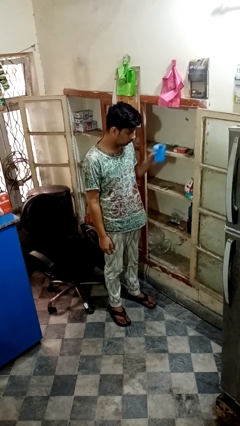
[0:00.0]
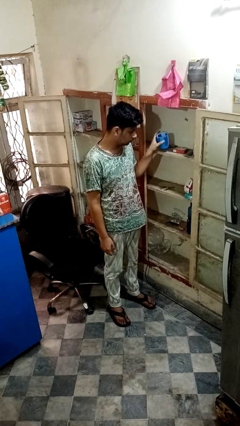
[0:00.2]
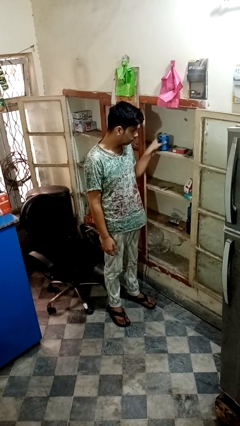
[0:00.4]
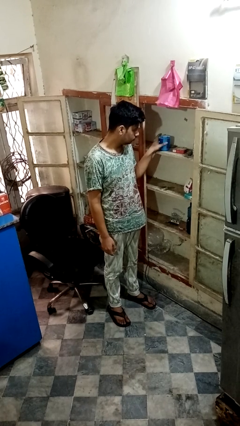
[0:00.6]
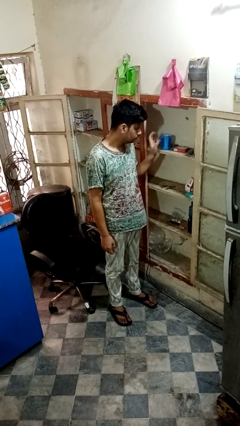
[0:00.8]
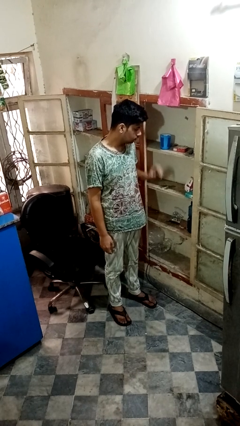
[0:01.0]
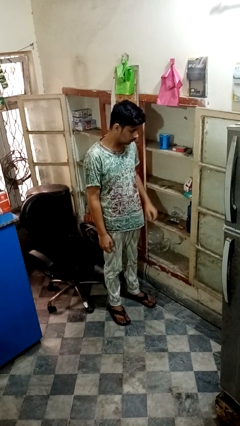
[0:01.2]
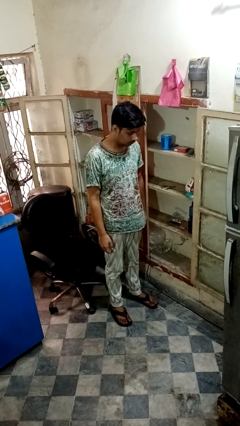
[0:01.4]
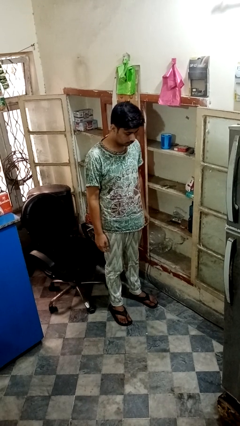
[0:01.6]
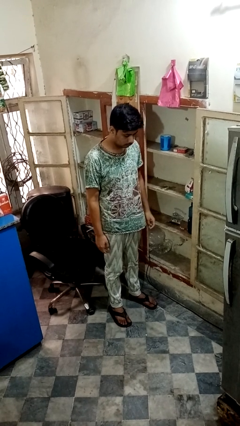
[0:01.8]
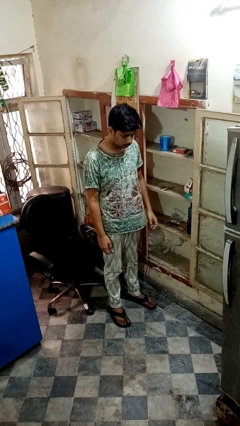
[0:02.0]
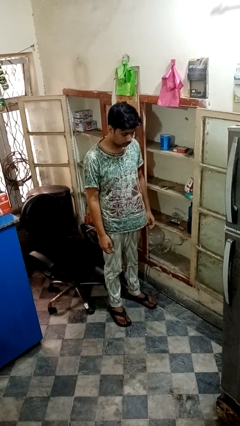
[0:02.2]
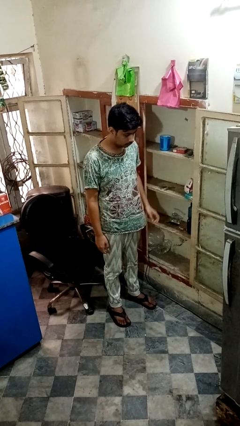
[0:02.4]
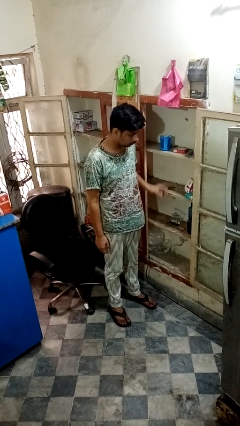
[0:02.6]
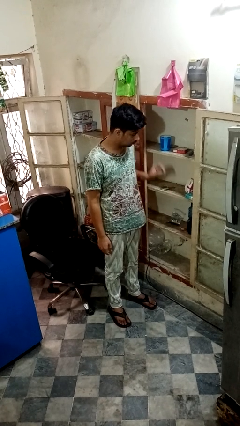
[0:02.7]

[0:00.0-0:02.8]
person puts object in cabinet

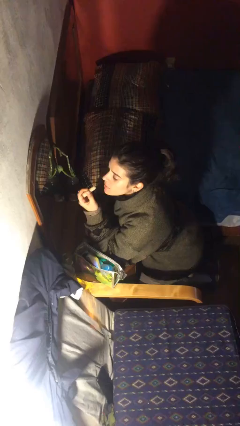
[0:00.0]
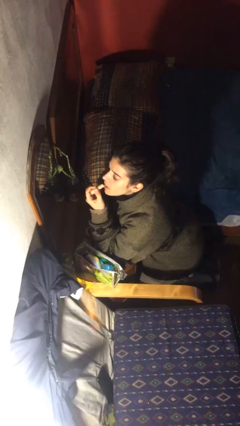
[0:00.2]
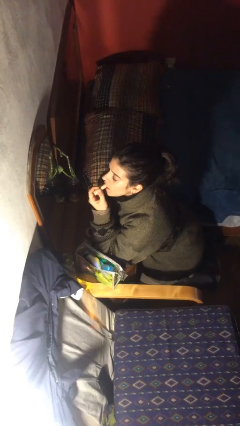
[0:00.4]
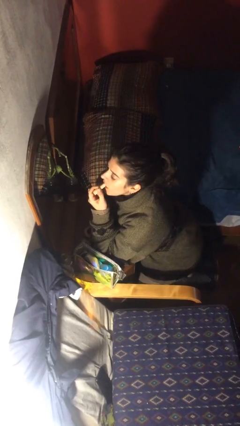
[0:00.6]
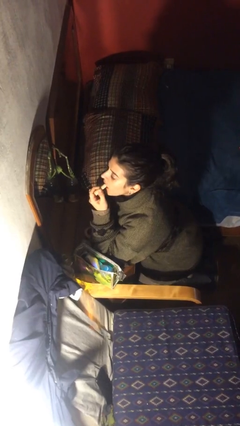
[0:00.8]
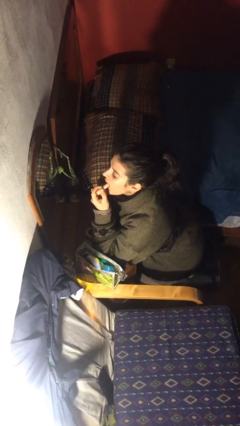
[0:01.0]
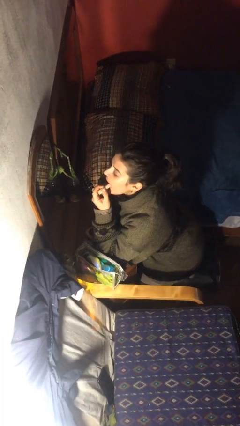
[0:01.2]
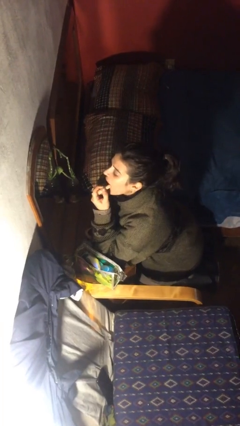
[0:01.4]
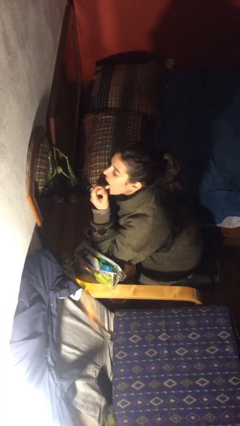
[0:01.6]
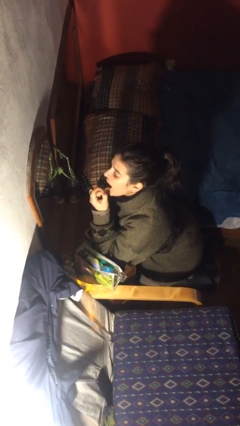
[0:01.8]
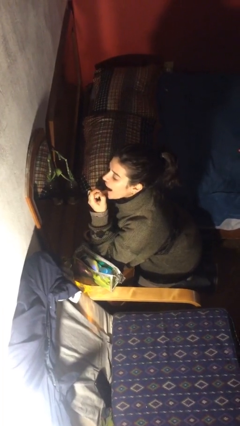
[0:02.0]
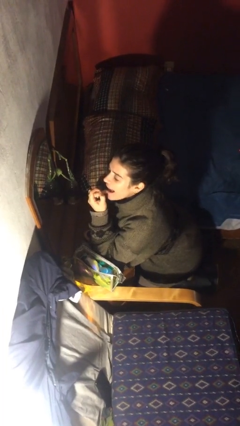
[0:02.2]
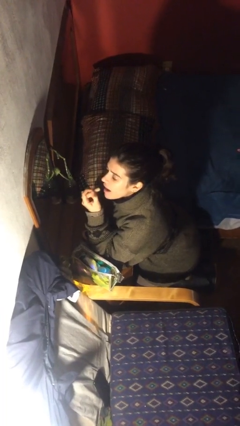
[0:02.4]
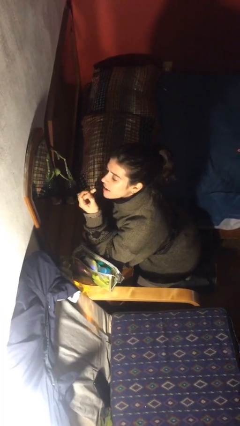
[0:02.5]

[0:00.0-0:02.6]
person applies lip makeup

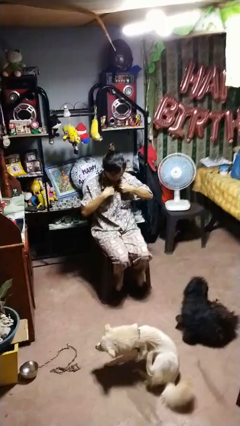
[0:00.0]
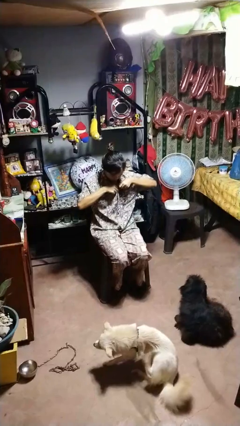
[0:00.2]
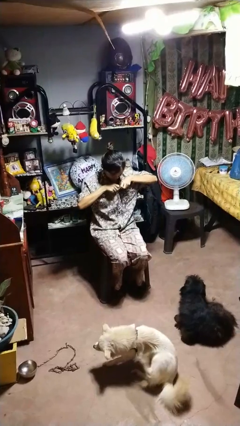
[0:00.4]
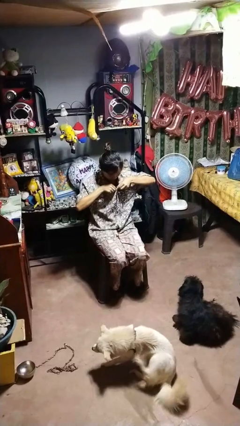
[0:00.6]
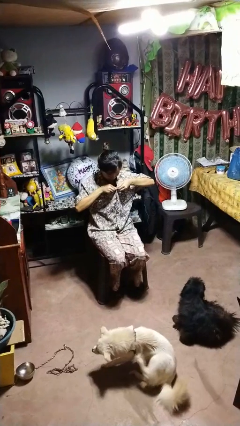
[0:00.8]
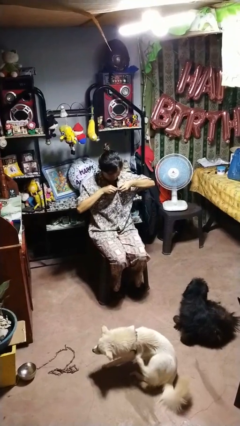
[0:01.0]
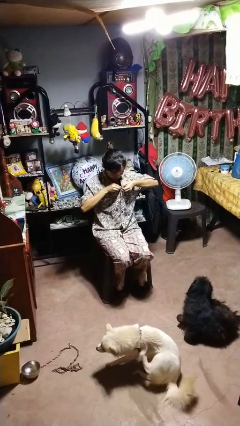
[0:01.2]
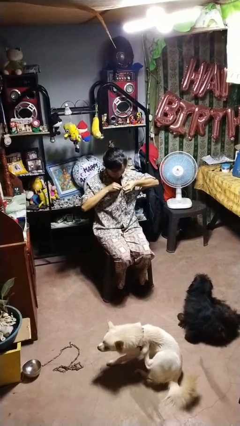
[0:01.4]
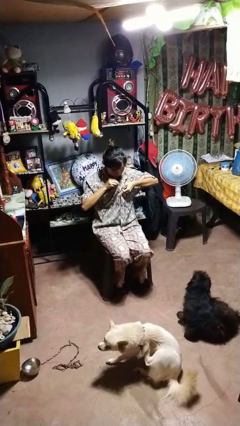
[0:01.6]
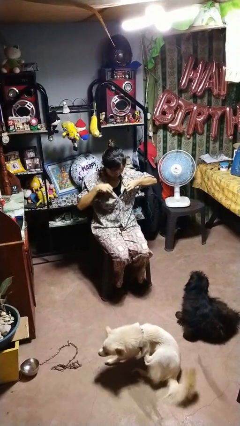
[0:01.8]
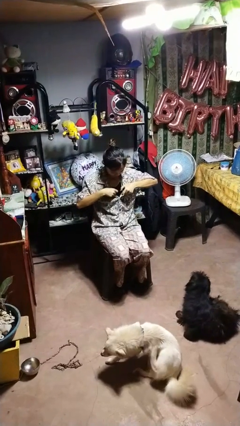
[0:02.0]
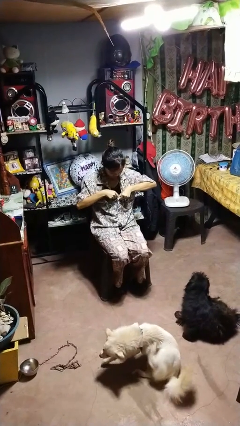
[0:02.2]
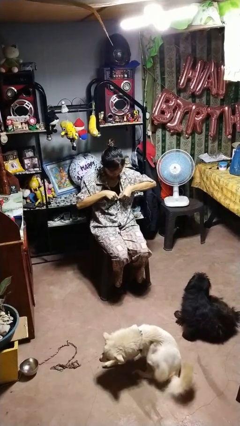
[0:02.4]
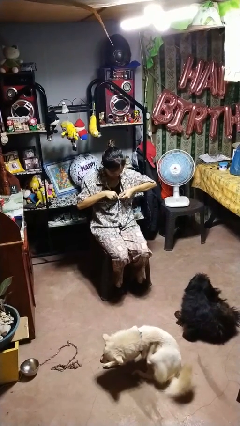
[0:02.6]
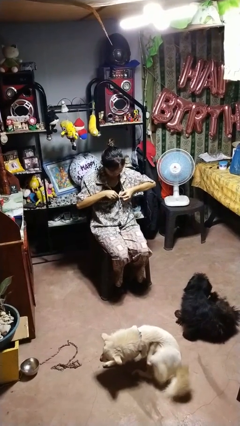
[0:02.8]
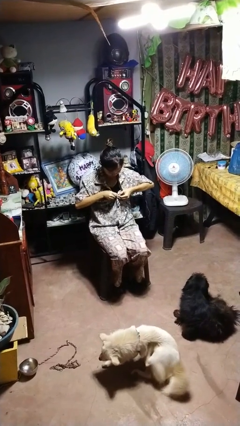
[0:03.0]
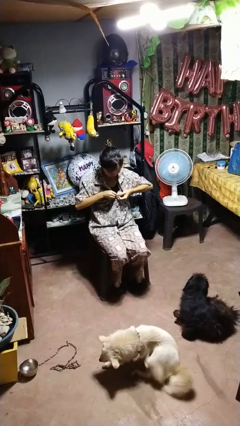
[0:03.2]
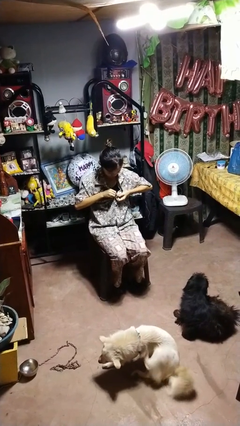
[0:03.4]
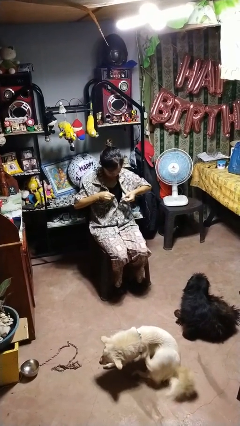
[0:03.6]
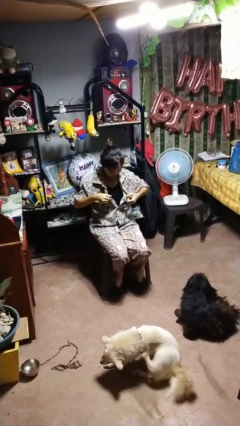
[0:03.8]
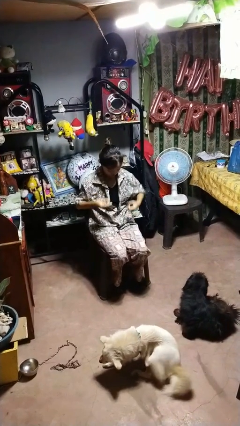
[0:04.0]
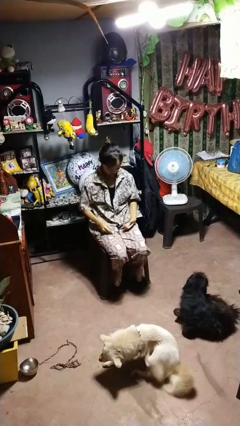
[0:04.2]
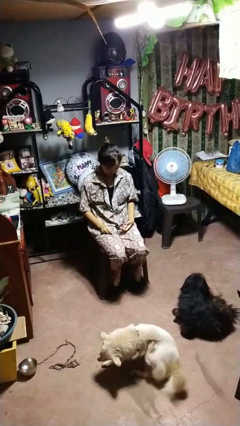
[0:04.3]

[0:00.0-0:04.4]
person unbuttons shirt

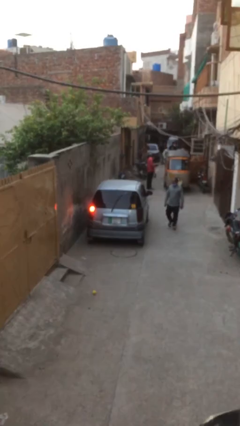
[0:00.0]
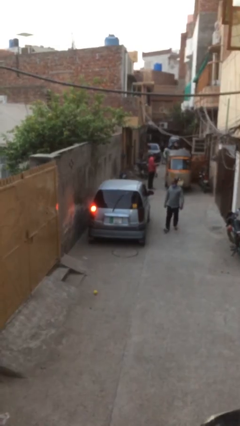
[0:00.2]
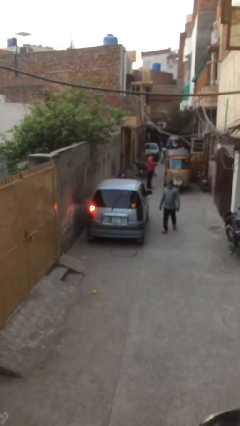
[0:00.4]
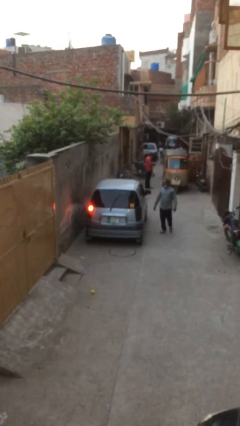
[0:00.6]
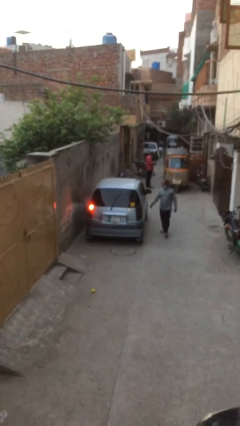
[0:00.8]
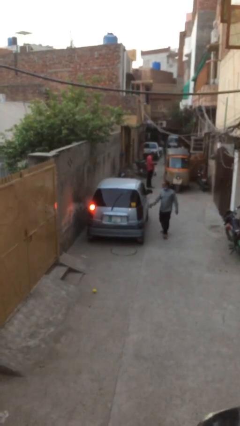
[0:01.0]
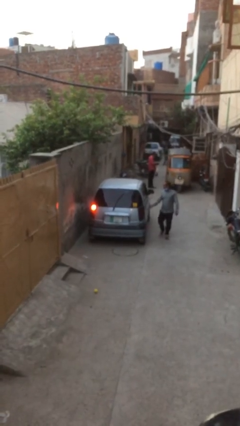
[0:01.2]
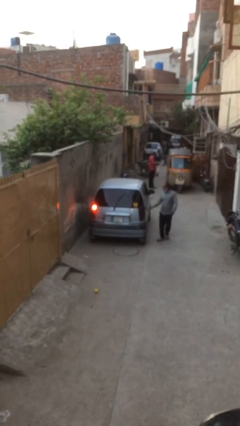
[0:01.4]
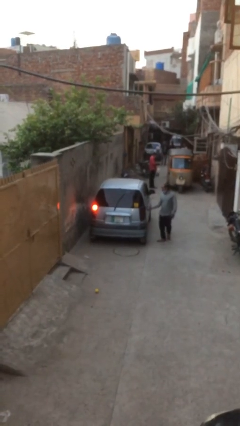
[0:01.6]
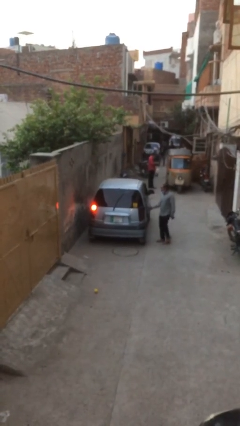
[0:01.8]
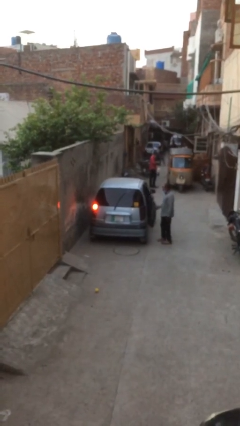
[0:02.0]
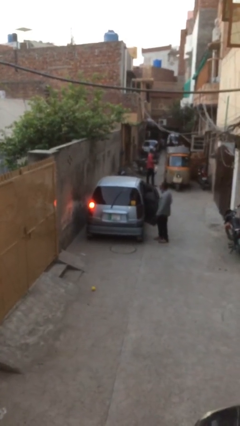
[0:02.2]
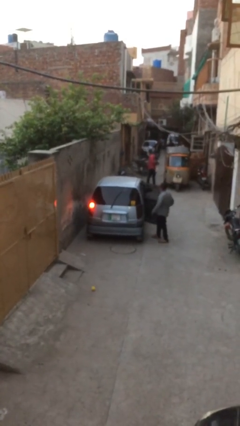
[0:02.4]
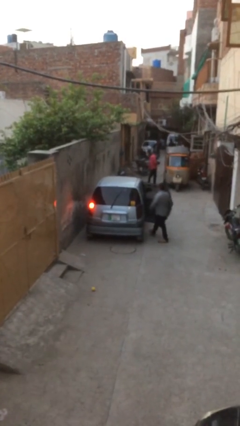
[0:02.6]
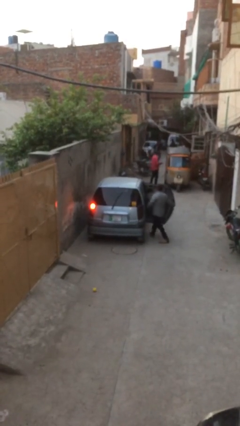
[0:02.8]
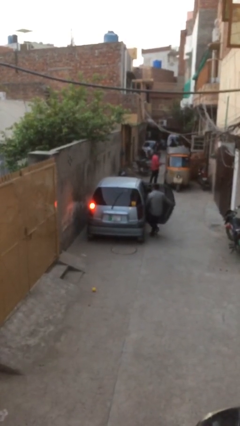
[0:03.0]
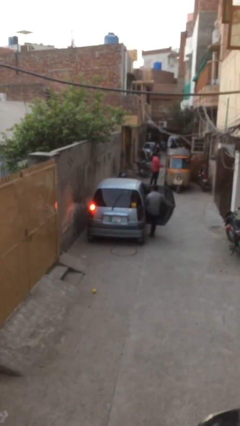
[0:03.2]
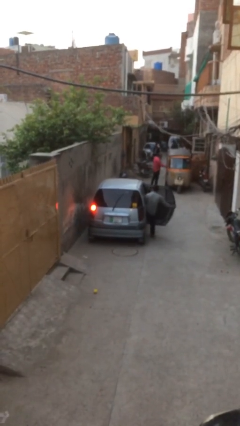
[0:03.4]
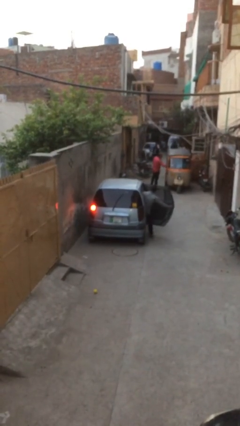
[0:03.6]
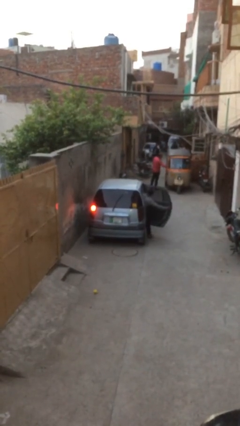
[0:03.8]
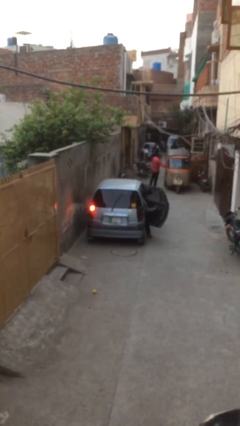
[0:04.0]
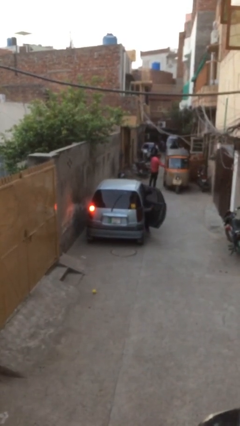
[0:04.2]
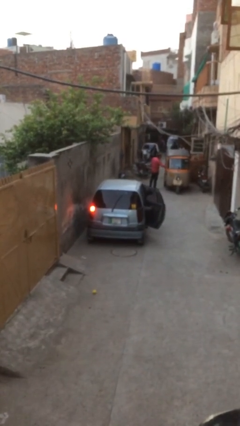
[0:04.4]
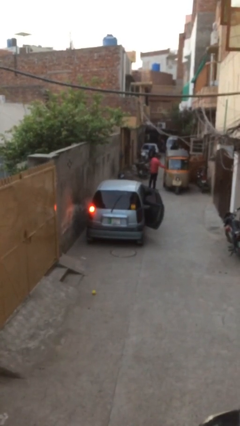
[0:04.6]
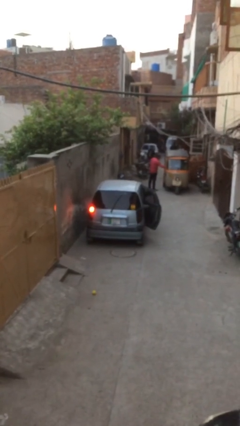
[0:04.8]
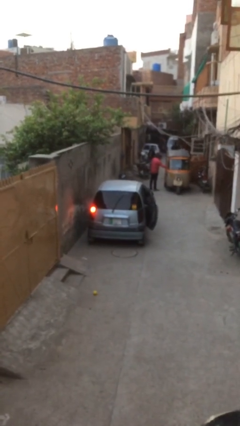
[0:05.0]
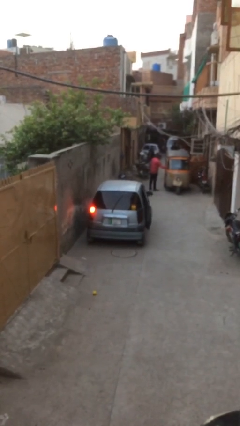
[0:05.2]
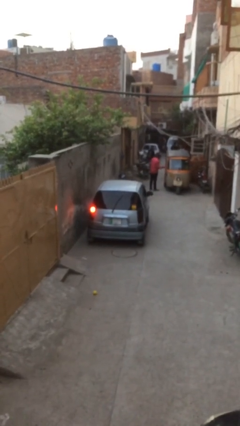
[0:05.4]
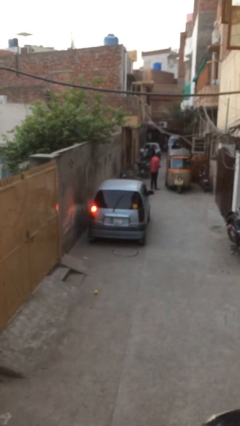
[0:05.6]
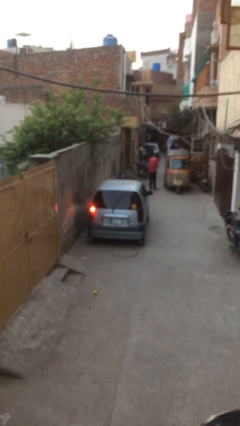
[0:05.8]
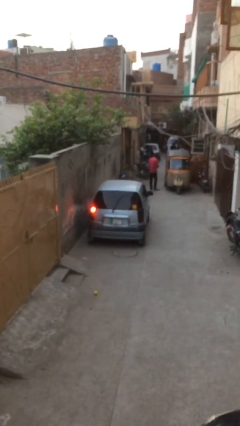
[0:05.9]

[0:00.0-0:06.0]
car picks up person

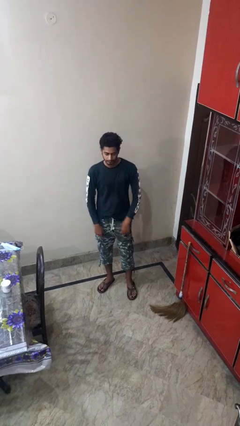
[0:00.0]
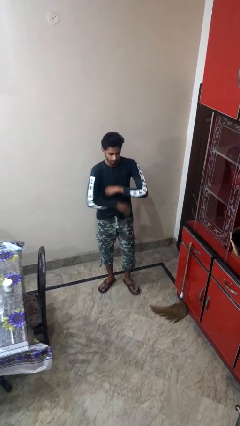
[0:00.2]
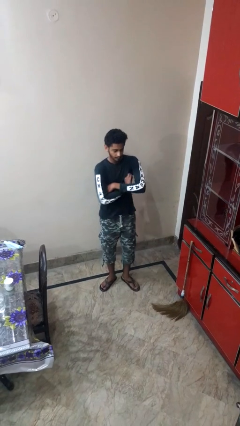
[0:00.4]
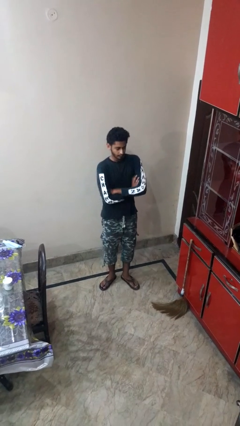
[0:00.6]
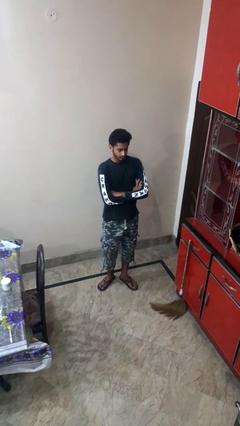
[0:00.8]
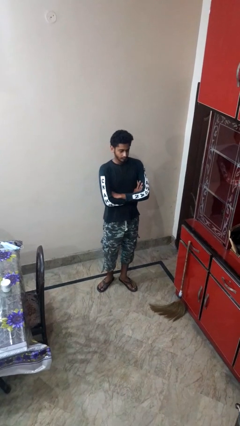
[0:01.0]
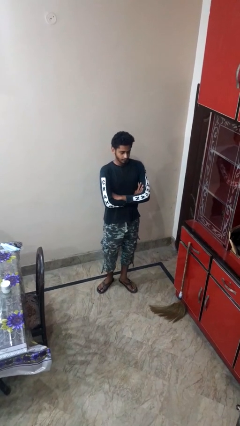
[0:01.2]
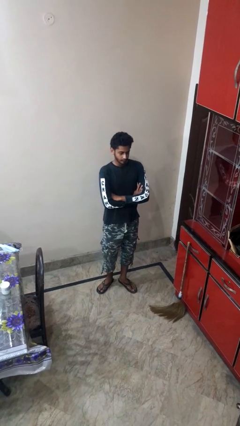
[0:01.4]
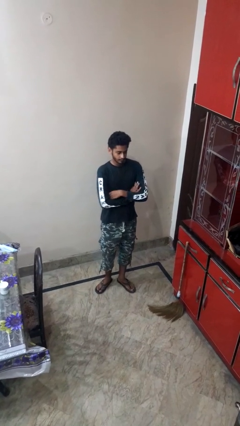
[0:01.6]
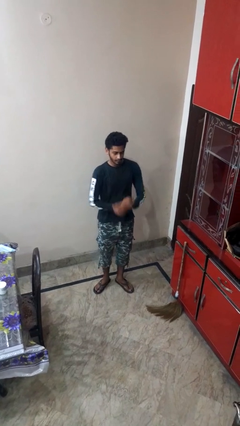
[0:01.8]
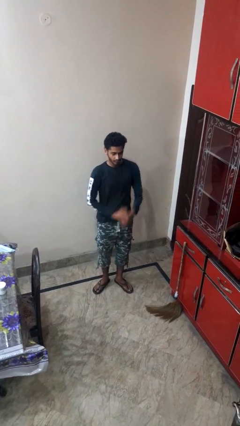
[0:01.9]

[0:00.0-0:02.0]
person crosses arms
